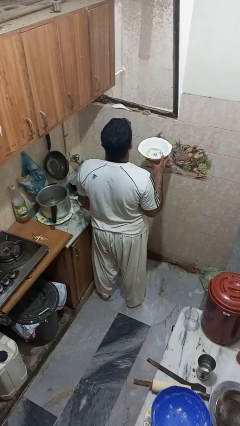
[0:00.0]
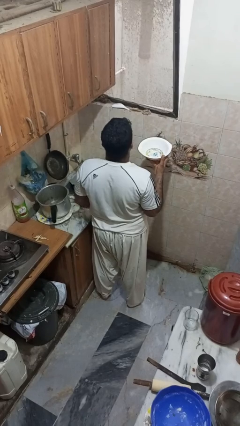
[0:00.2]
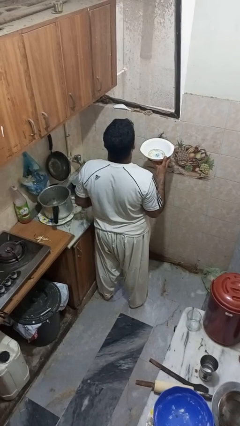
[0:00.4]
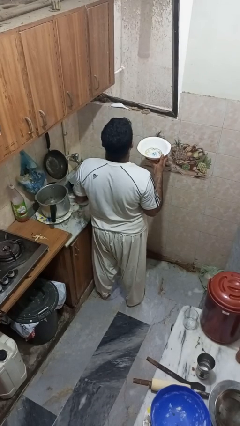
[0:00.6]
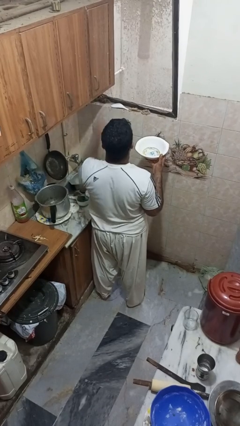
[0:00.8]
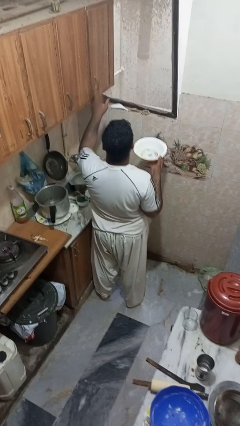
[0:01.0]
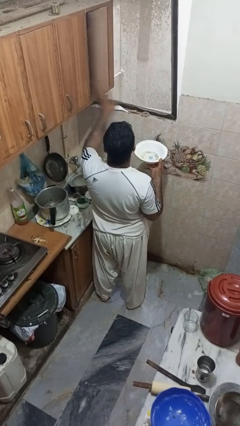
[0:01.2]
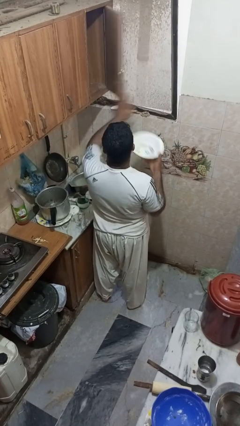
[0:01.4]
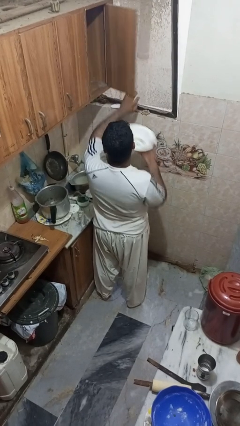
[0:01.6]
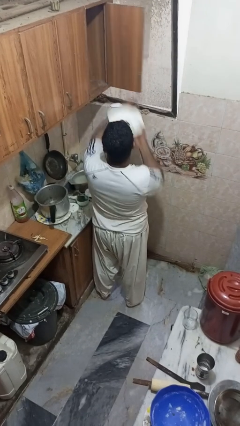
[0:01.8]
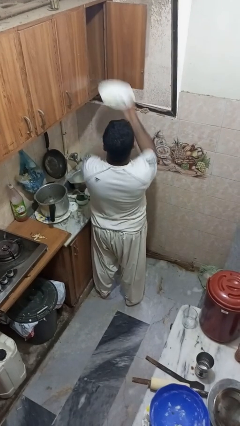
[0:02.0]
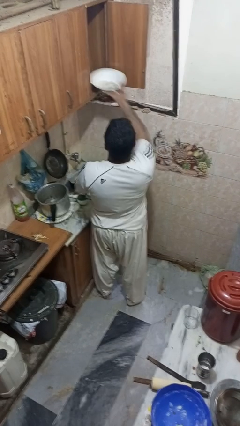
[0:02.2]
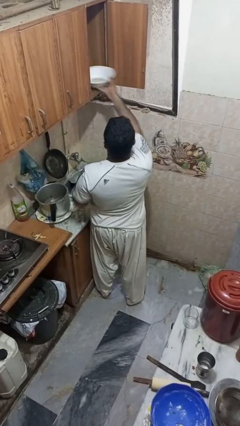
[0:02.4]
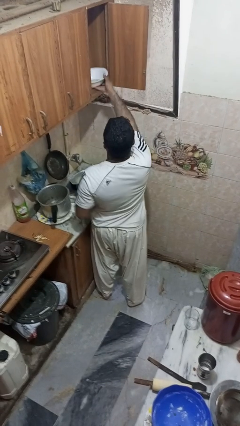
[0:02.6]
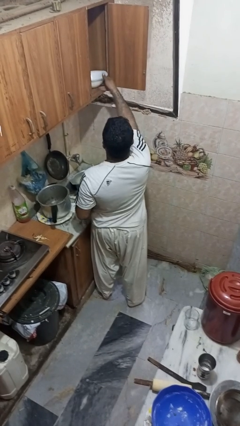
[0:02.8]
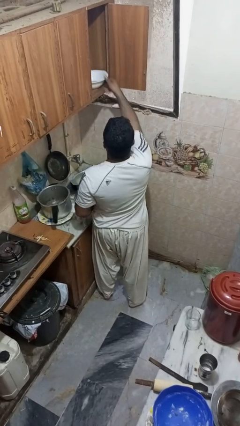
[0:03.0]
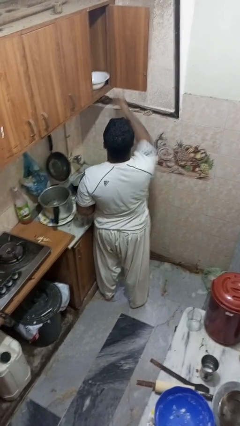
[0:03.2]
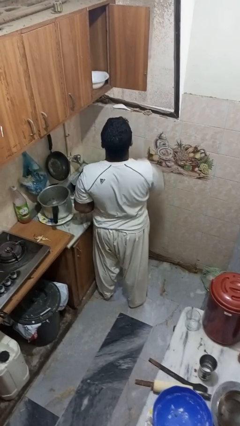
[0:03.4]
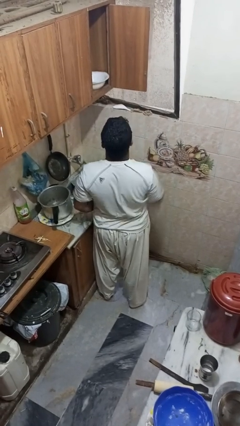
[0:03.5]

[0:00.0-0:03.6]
person puts object in cabinet

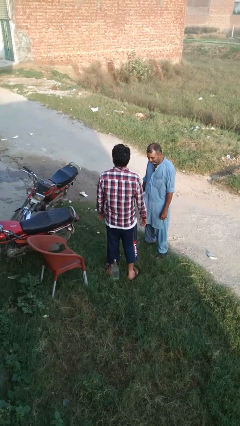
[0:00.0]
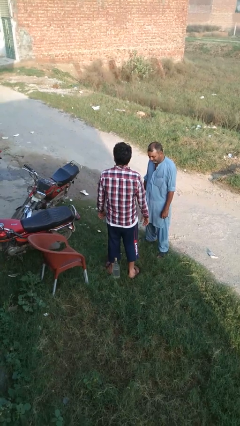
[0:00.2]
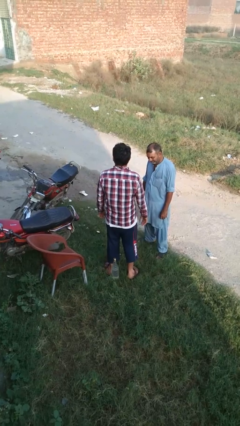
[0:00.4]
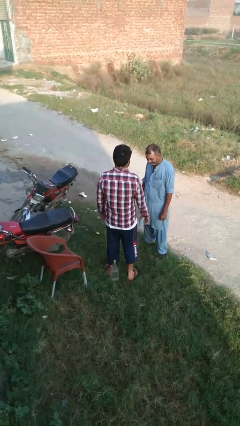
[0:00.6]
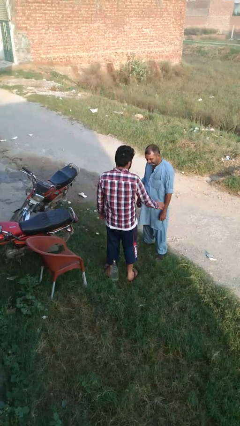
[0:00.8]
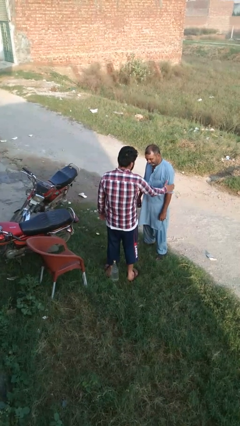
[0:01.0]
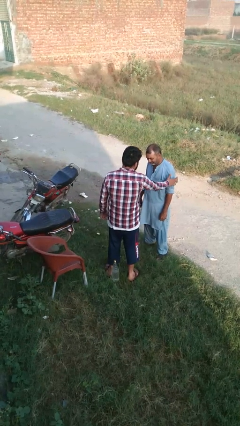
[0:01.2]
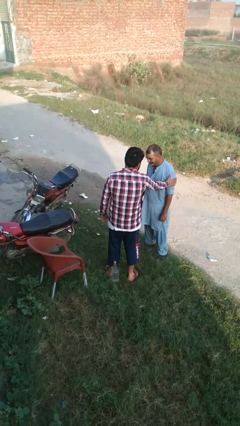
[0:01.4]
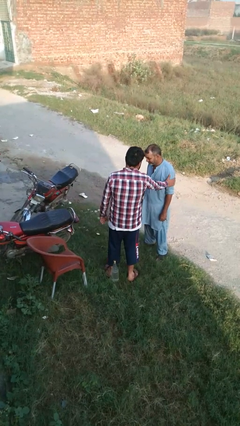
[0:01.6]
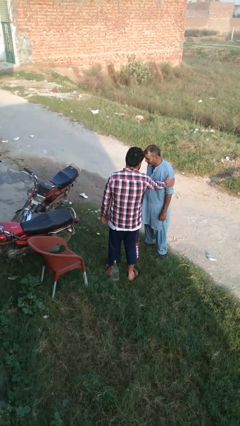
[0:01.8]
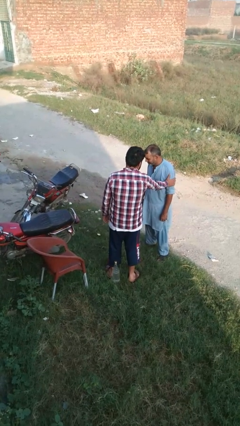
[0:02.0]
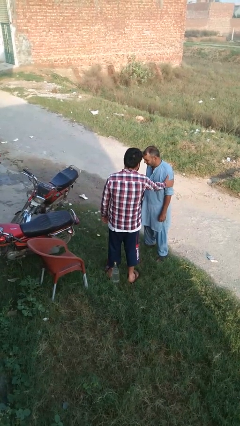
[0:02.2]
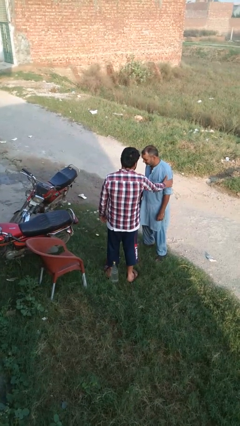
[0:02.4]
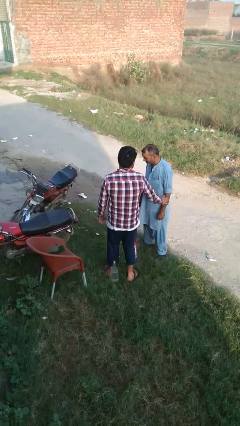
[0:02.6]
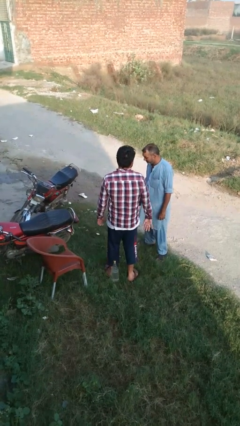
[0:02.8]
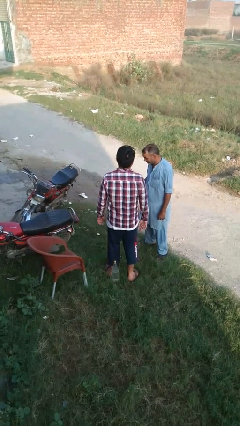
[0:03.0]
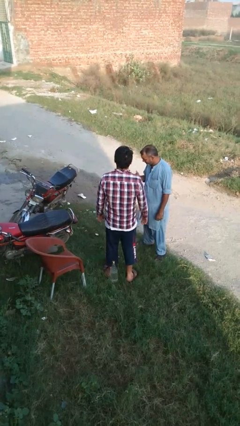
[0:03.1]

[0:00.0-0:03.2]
person grabs person by bicep

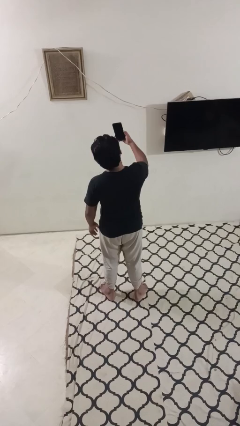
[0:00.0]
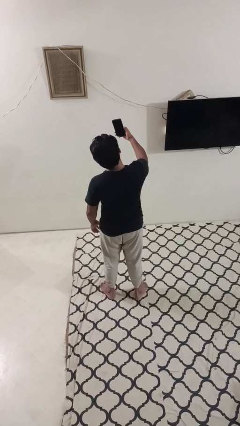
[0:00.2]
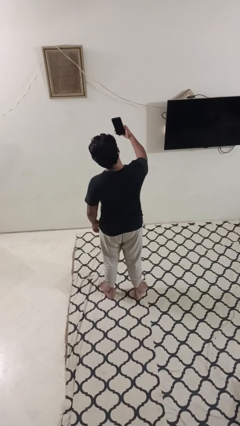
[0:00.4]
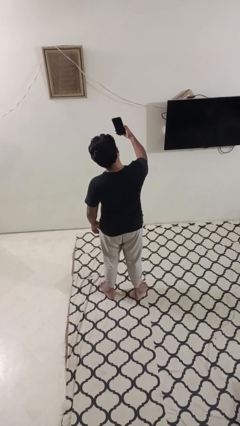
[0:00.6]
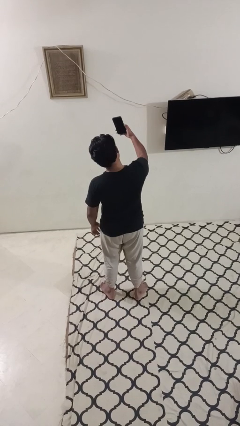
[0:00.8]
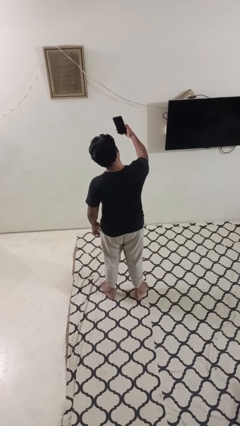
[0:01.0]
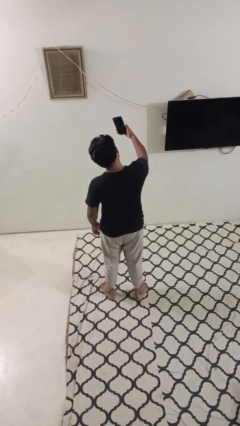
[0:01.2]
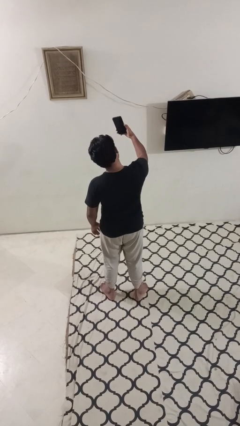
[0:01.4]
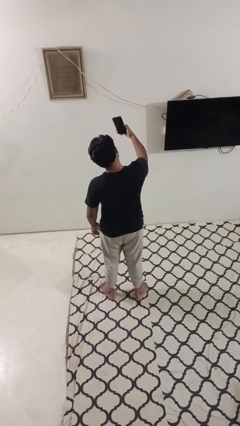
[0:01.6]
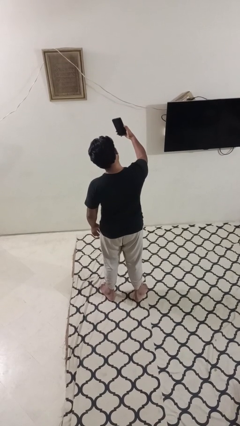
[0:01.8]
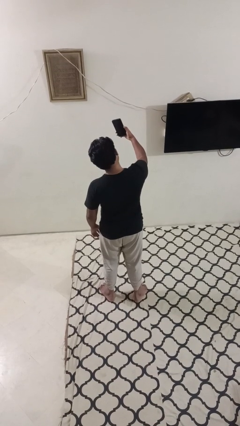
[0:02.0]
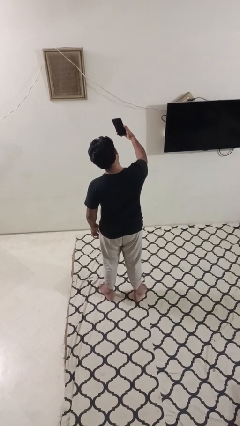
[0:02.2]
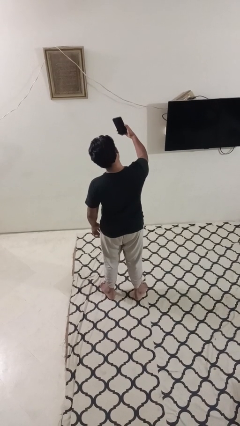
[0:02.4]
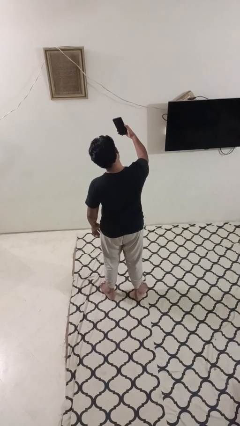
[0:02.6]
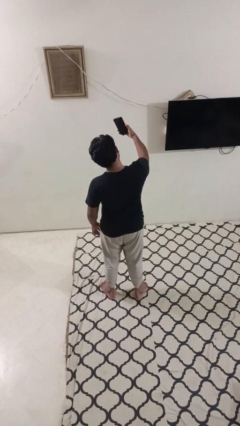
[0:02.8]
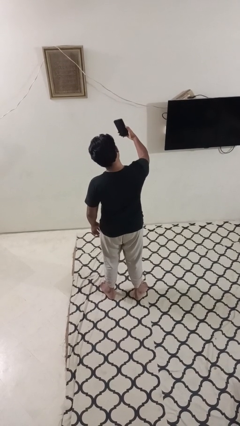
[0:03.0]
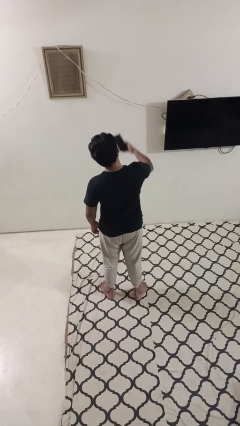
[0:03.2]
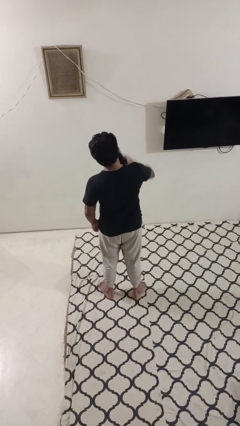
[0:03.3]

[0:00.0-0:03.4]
person takes selfie

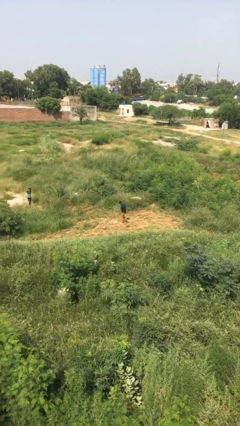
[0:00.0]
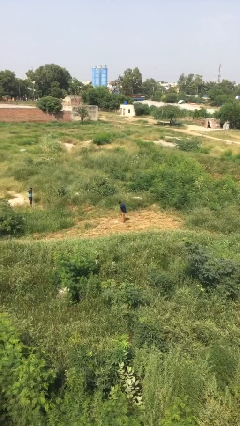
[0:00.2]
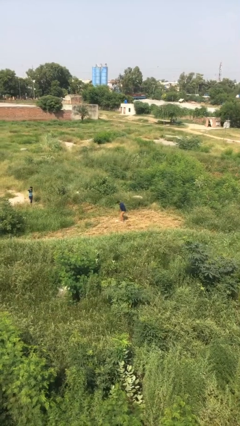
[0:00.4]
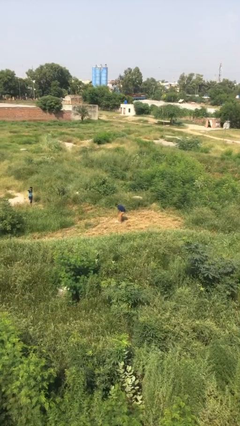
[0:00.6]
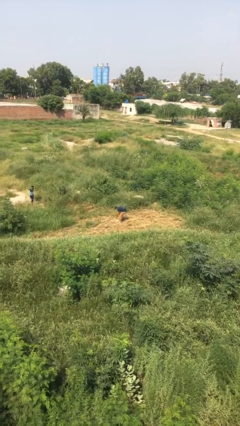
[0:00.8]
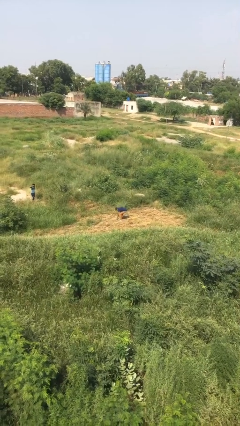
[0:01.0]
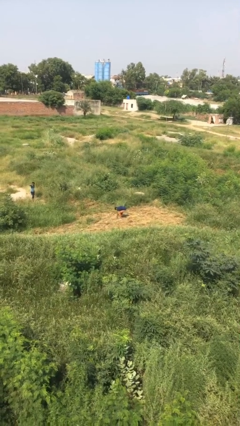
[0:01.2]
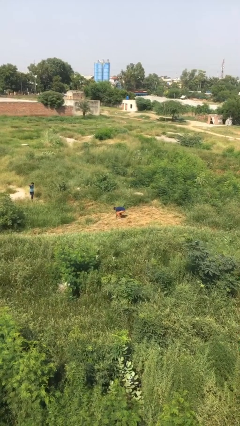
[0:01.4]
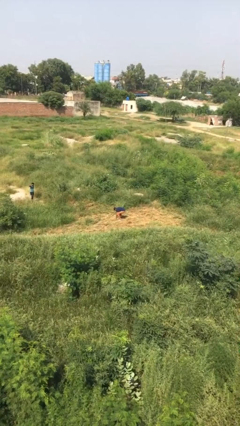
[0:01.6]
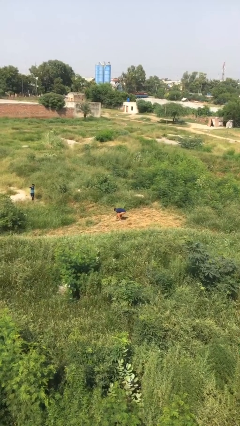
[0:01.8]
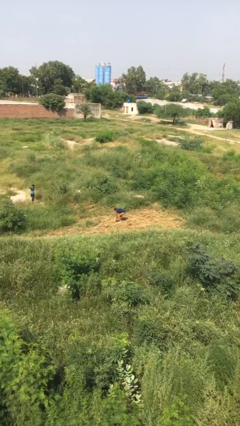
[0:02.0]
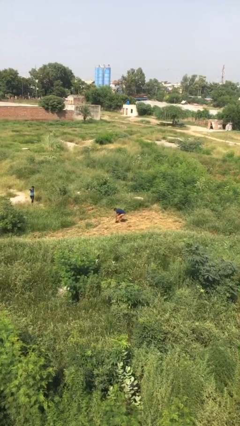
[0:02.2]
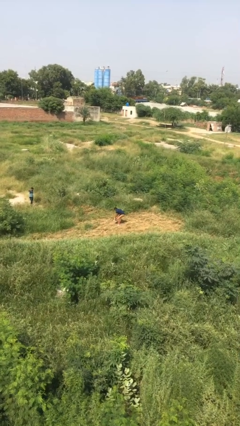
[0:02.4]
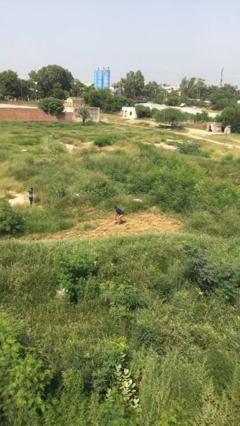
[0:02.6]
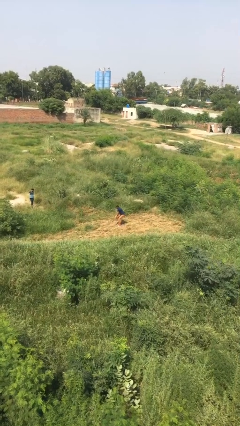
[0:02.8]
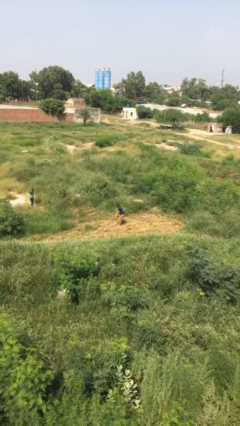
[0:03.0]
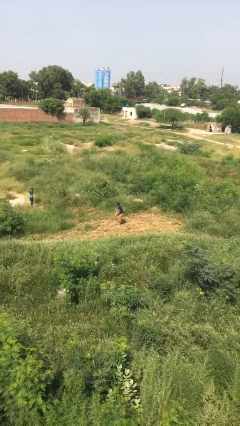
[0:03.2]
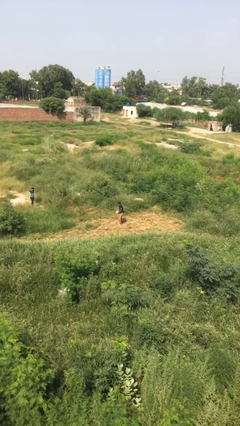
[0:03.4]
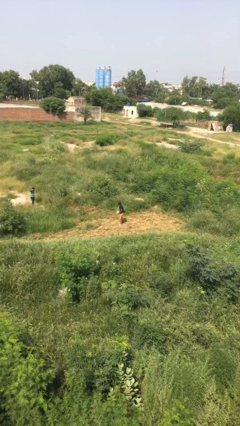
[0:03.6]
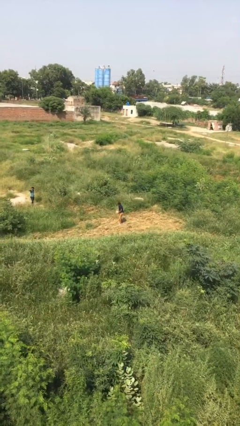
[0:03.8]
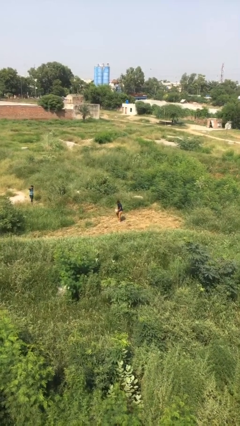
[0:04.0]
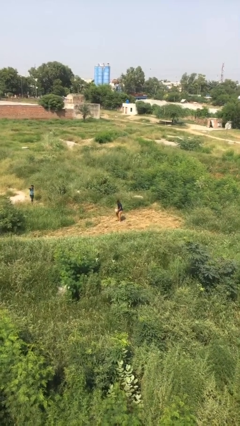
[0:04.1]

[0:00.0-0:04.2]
person picks up object from floor

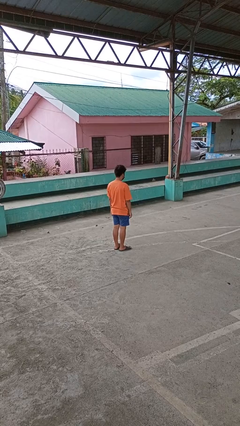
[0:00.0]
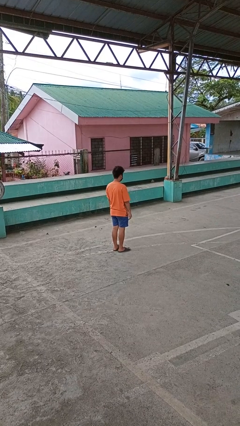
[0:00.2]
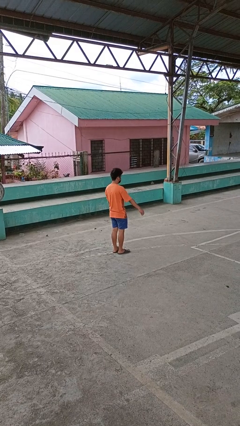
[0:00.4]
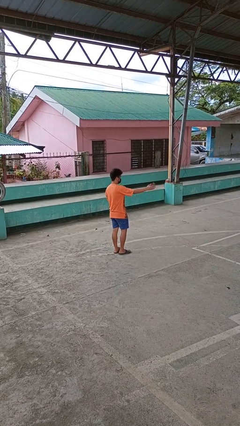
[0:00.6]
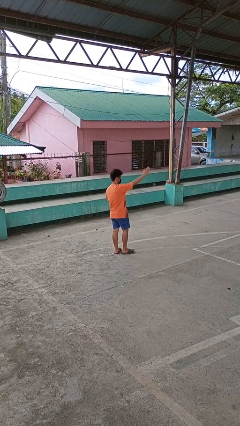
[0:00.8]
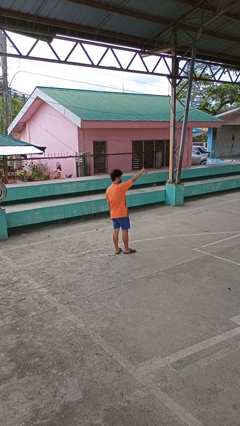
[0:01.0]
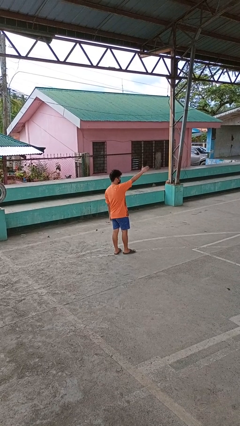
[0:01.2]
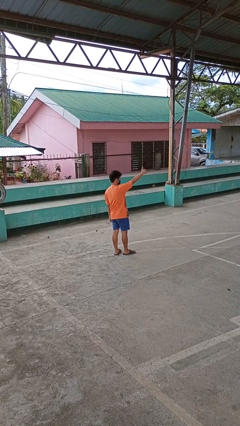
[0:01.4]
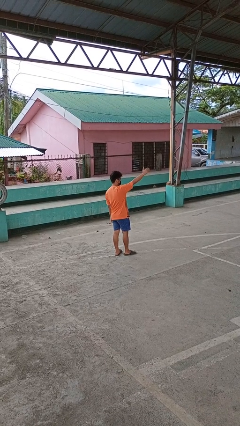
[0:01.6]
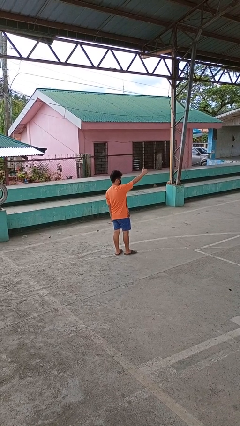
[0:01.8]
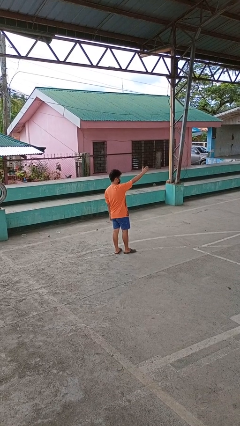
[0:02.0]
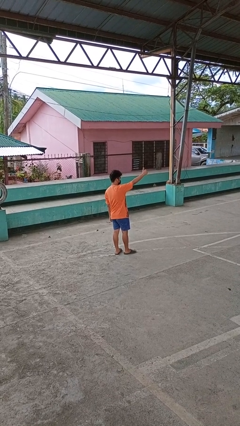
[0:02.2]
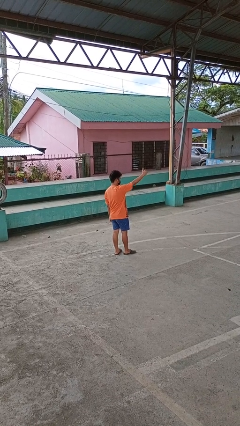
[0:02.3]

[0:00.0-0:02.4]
person gestures come here

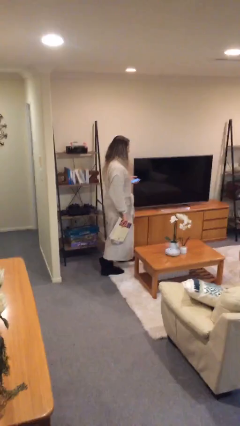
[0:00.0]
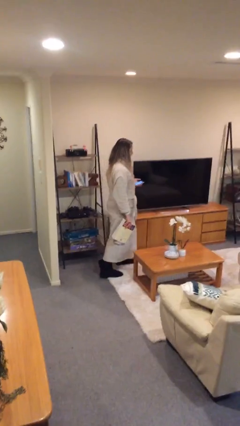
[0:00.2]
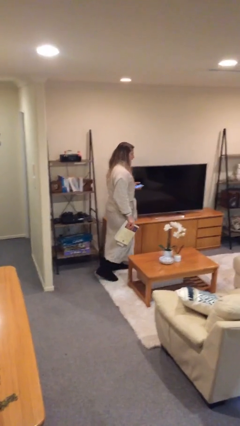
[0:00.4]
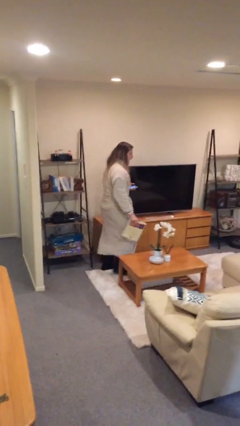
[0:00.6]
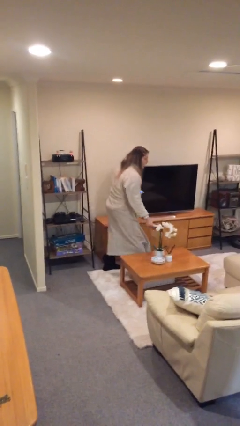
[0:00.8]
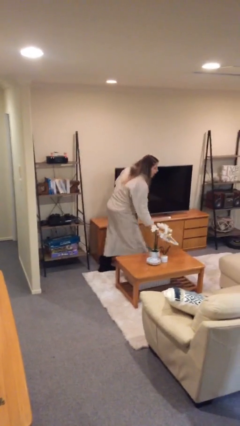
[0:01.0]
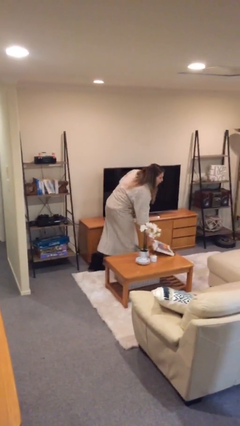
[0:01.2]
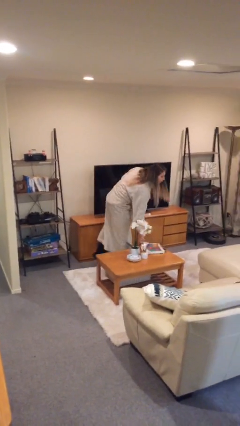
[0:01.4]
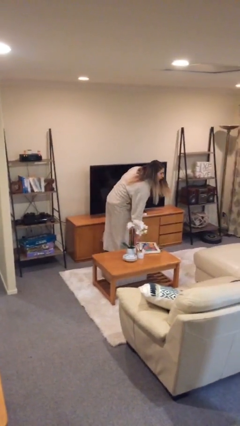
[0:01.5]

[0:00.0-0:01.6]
person puts down object on table
